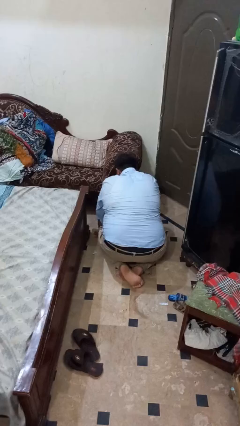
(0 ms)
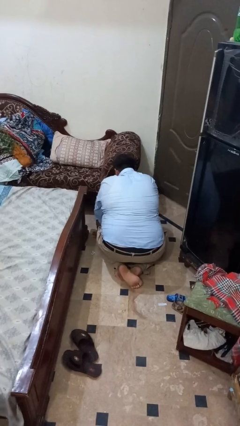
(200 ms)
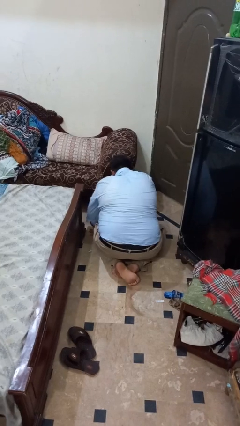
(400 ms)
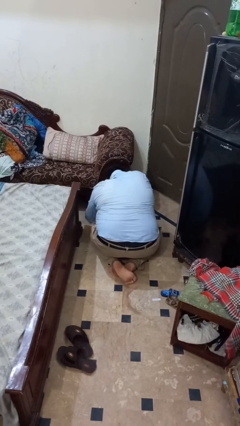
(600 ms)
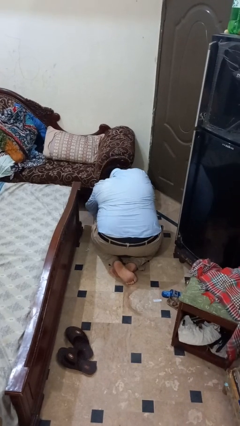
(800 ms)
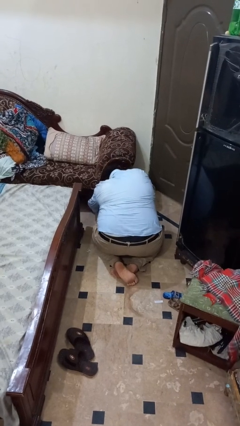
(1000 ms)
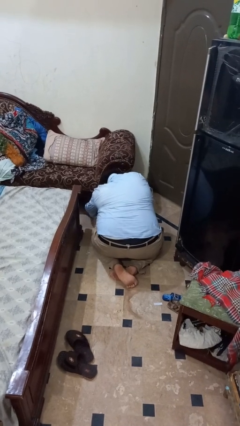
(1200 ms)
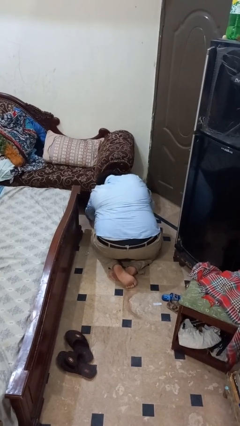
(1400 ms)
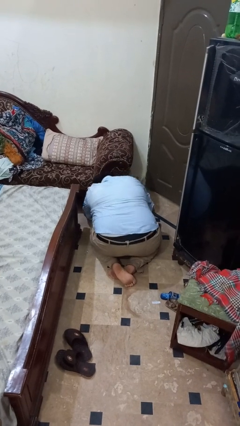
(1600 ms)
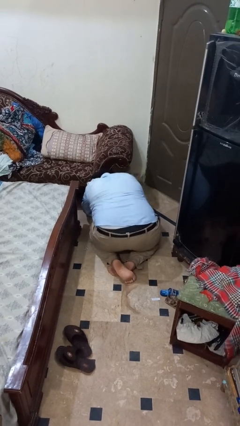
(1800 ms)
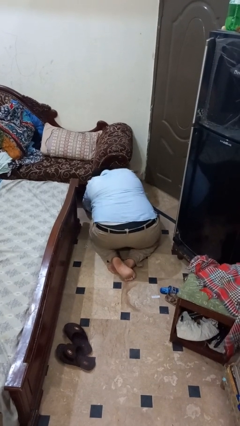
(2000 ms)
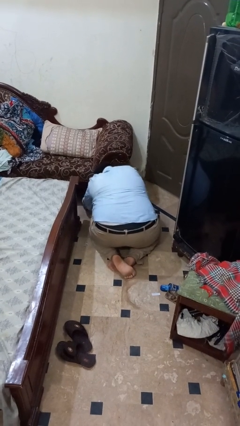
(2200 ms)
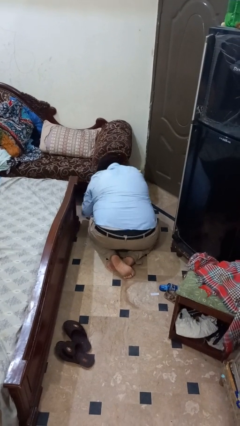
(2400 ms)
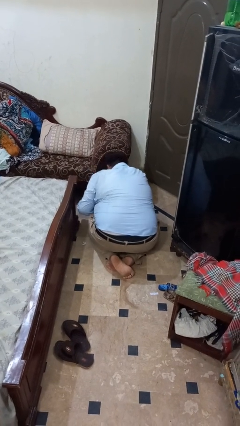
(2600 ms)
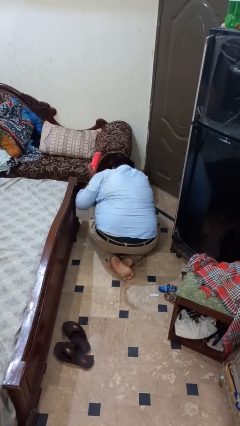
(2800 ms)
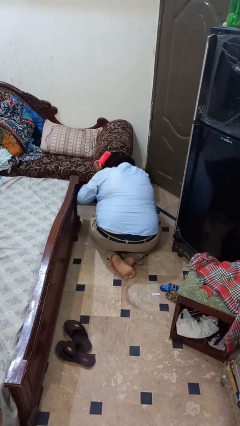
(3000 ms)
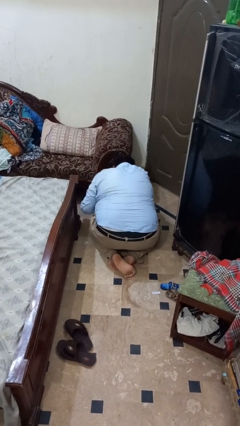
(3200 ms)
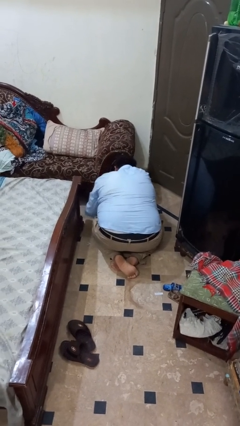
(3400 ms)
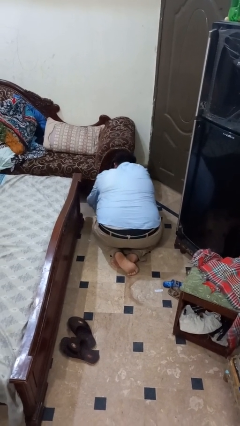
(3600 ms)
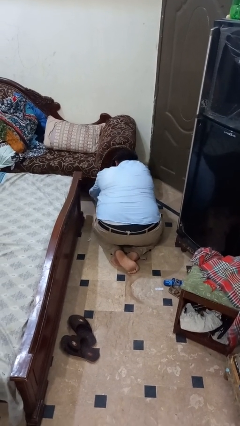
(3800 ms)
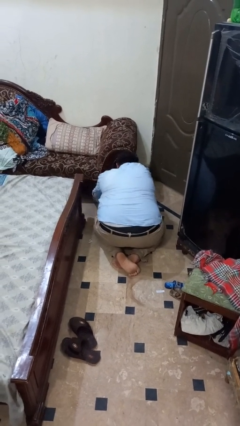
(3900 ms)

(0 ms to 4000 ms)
person searches under couch

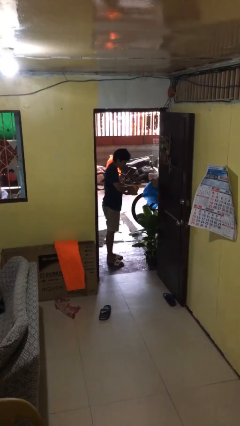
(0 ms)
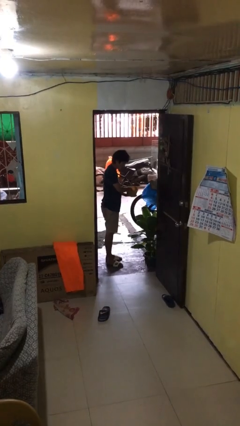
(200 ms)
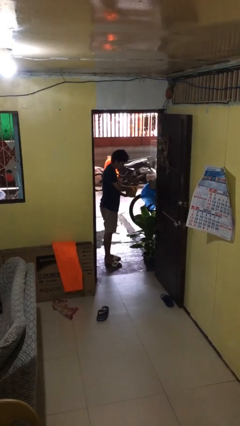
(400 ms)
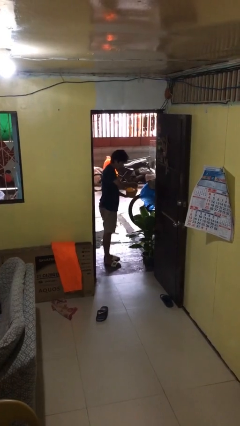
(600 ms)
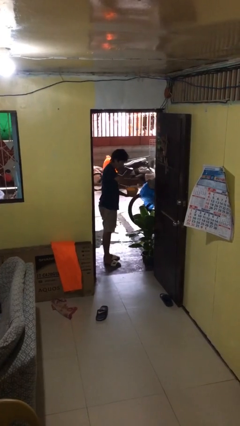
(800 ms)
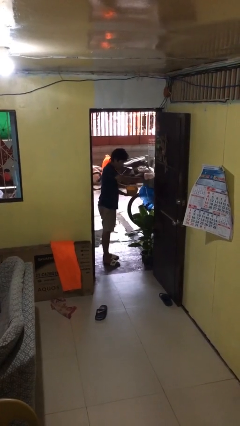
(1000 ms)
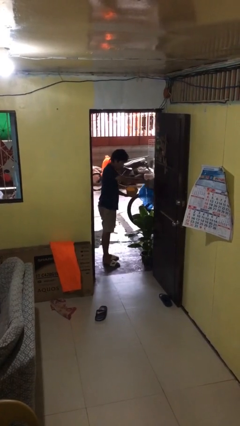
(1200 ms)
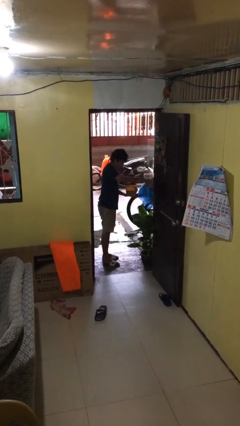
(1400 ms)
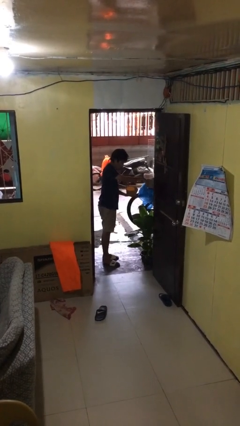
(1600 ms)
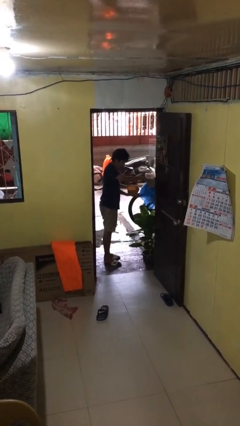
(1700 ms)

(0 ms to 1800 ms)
person waters houseplant

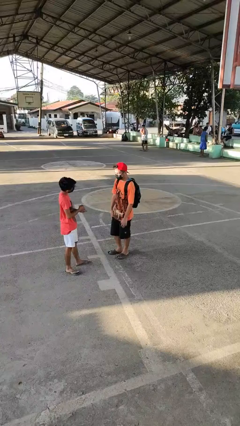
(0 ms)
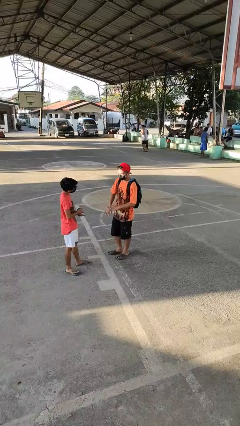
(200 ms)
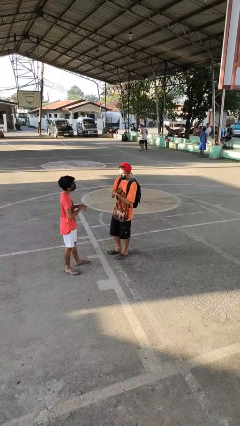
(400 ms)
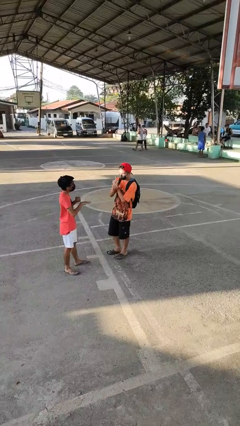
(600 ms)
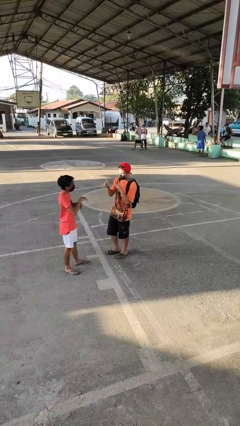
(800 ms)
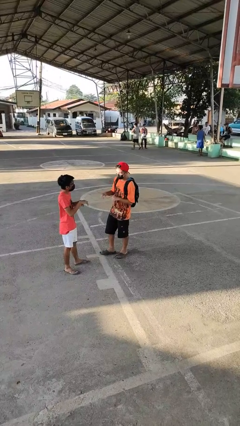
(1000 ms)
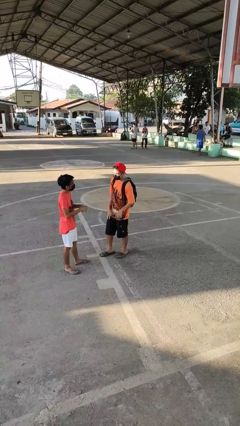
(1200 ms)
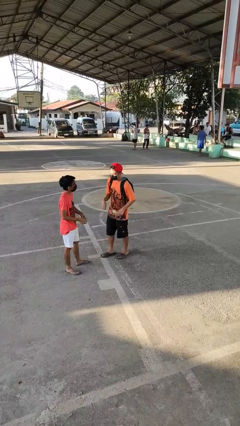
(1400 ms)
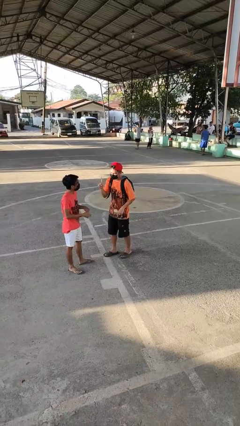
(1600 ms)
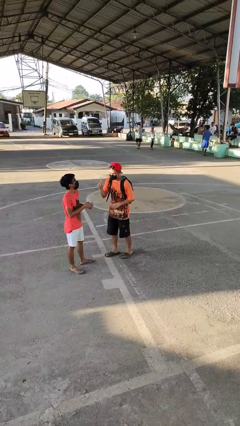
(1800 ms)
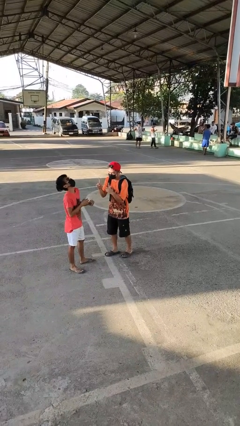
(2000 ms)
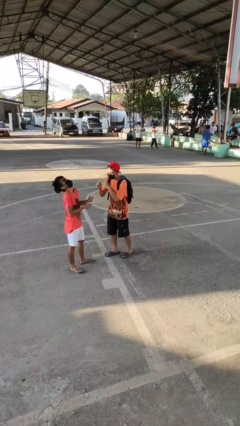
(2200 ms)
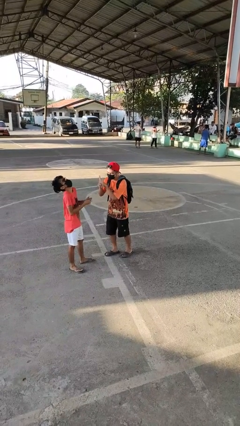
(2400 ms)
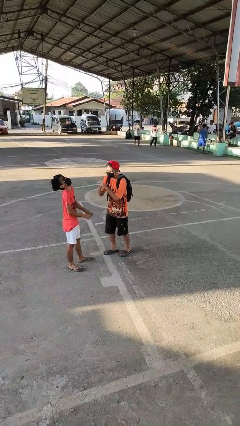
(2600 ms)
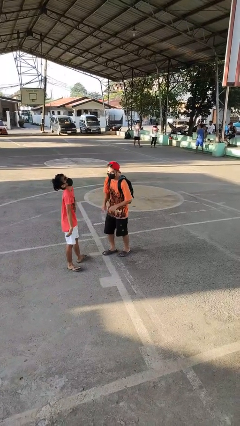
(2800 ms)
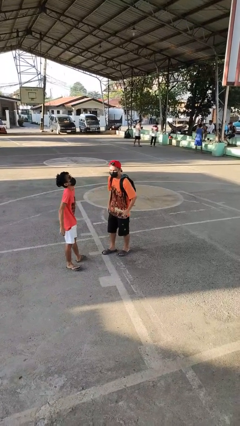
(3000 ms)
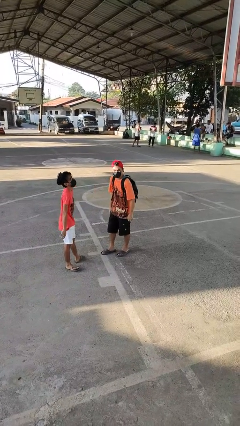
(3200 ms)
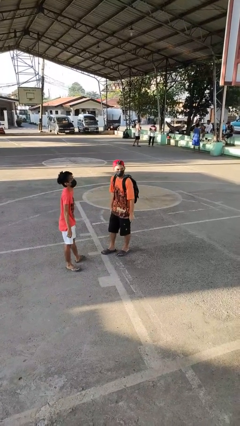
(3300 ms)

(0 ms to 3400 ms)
person talks to person

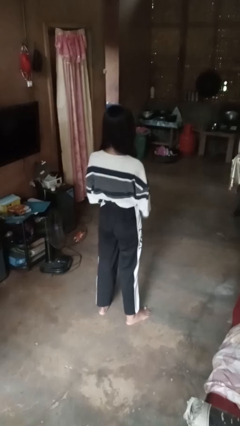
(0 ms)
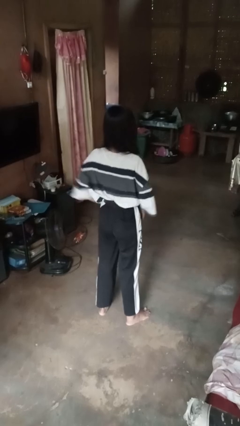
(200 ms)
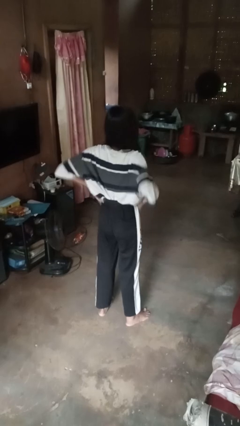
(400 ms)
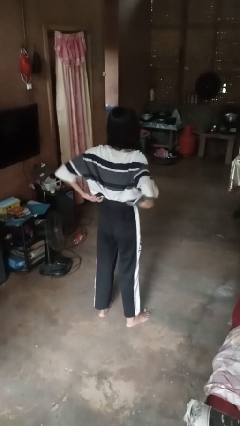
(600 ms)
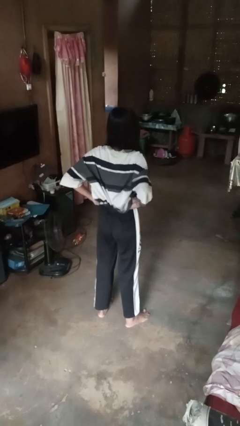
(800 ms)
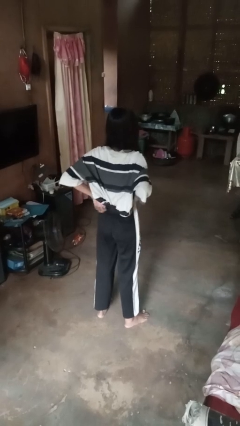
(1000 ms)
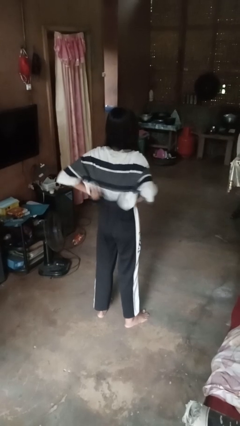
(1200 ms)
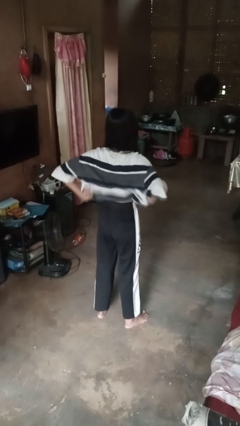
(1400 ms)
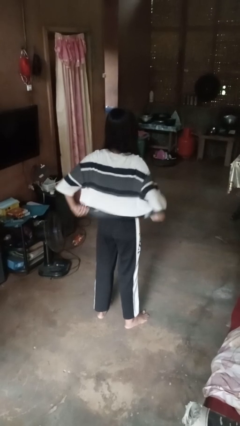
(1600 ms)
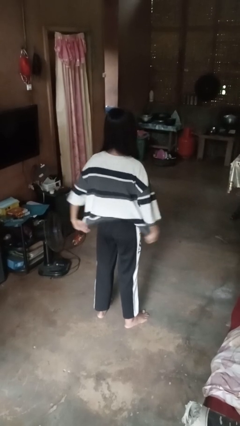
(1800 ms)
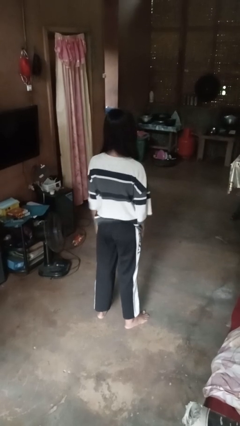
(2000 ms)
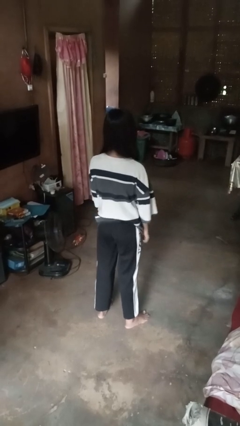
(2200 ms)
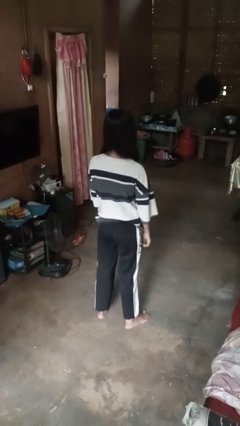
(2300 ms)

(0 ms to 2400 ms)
person untucks shirt

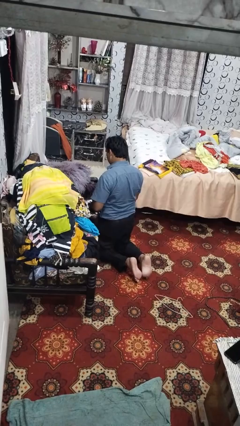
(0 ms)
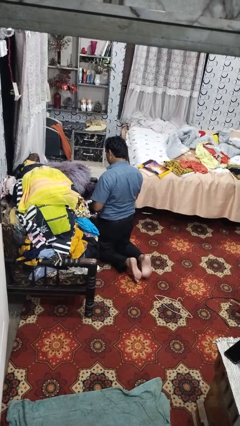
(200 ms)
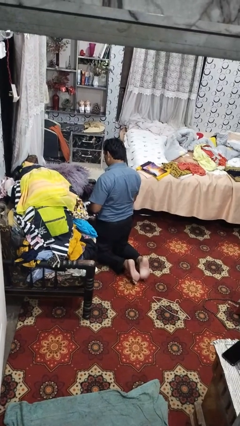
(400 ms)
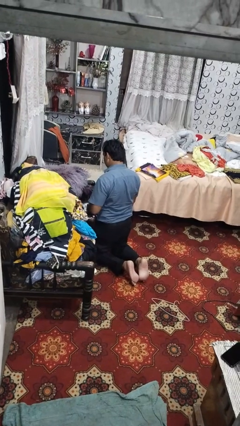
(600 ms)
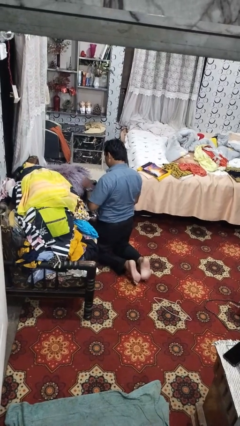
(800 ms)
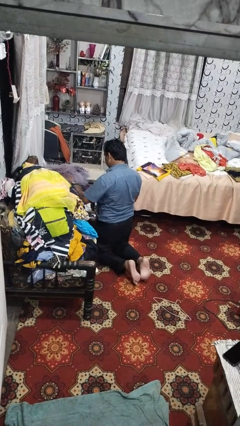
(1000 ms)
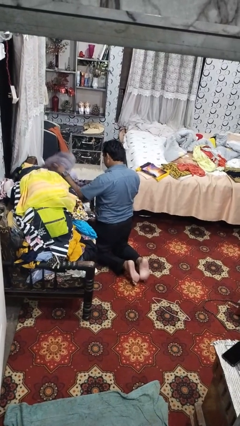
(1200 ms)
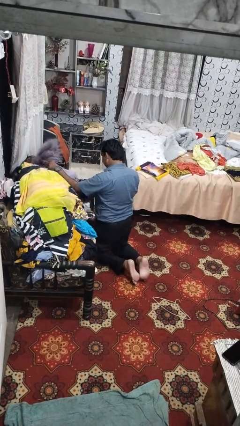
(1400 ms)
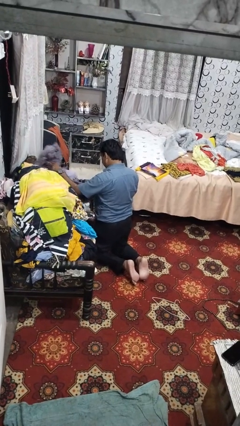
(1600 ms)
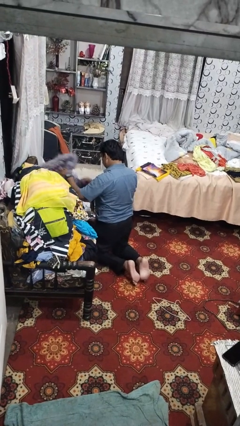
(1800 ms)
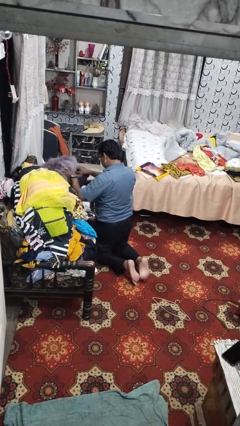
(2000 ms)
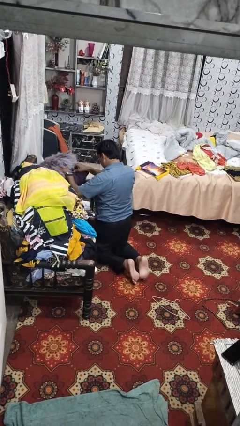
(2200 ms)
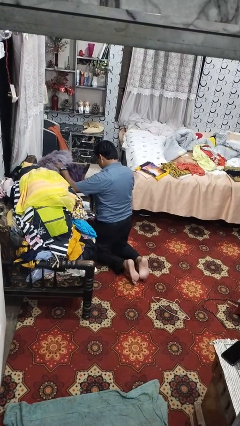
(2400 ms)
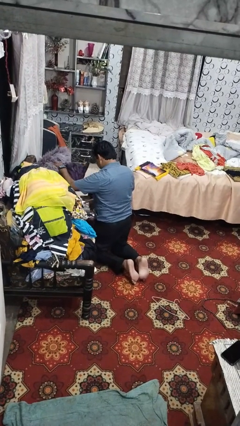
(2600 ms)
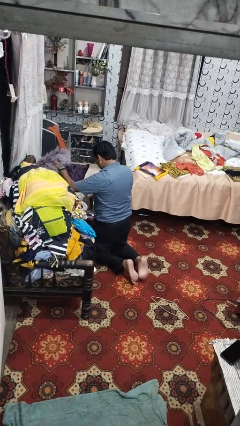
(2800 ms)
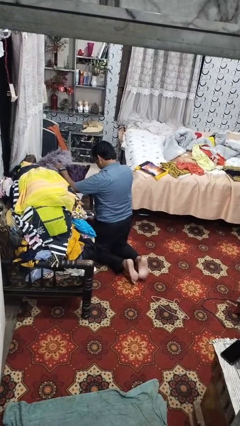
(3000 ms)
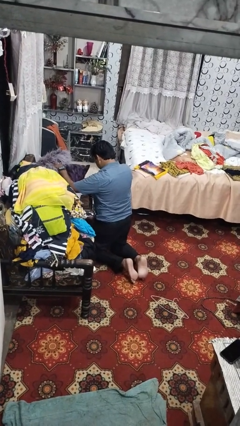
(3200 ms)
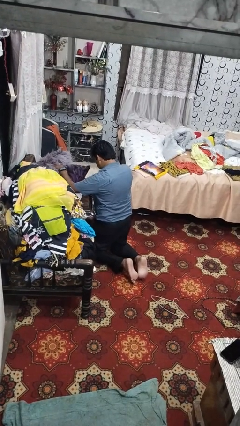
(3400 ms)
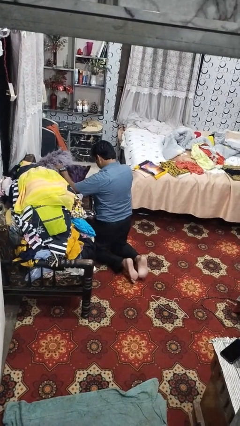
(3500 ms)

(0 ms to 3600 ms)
person searches in couch

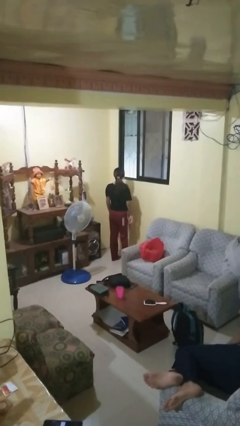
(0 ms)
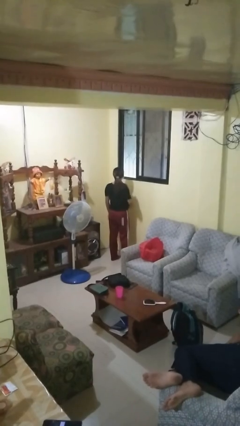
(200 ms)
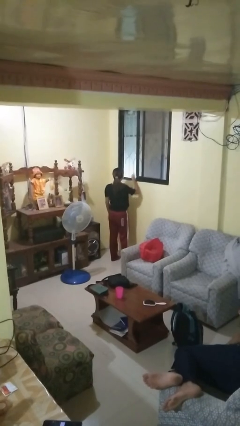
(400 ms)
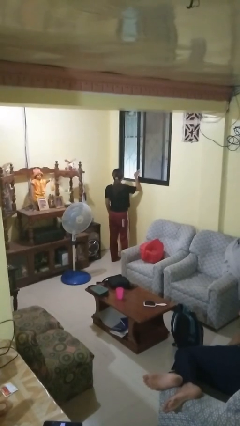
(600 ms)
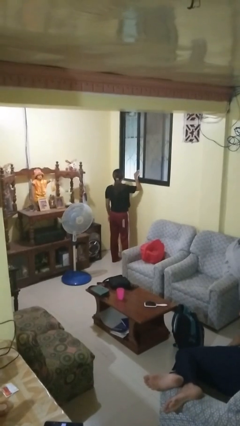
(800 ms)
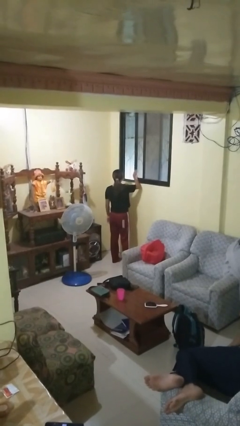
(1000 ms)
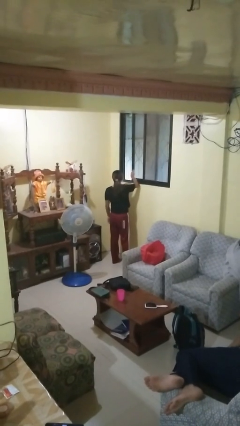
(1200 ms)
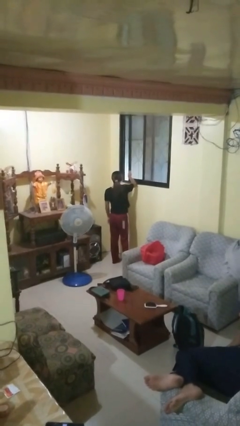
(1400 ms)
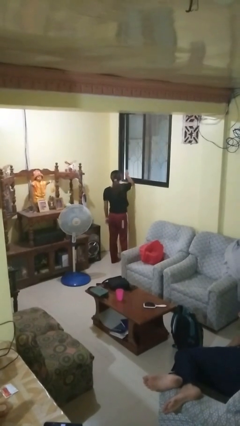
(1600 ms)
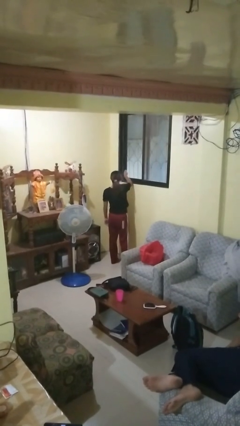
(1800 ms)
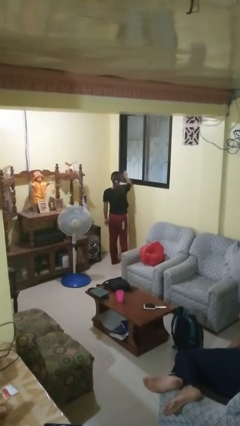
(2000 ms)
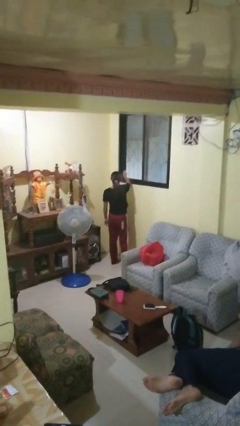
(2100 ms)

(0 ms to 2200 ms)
person closes home window
